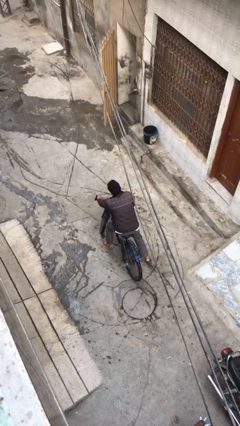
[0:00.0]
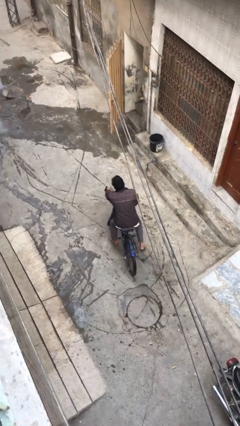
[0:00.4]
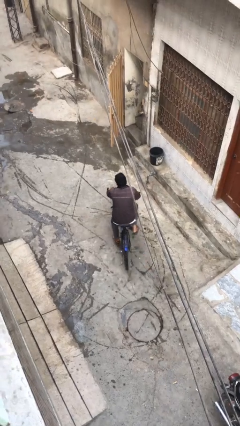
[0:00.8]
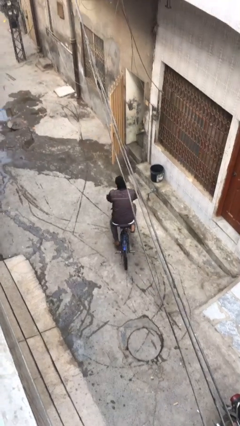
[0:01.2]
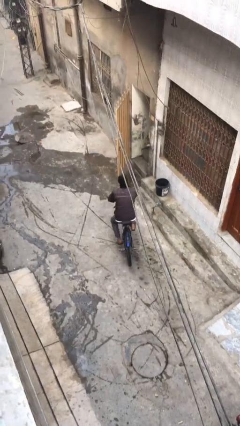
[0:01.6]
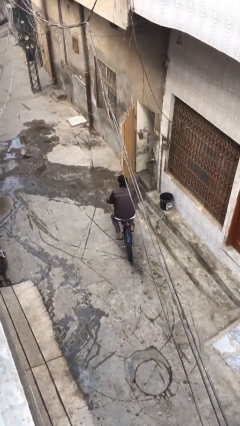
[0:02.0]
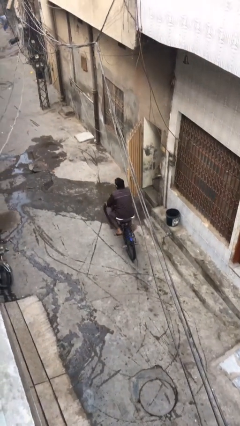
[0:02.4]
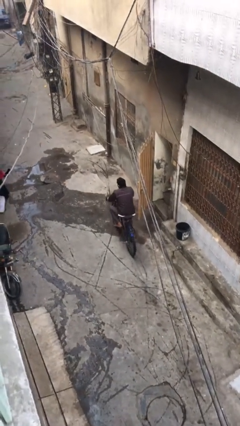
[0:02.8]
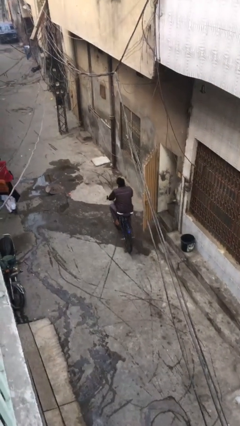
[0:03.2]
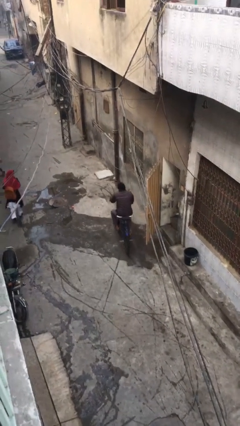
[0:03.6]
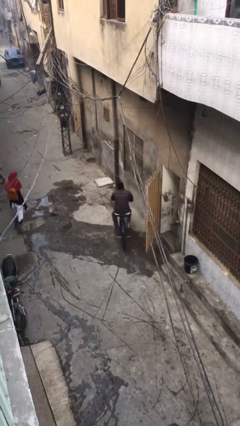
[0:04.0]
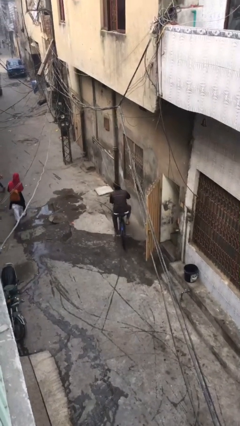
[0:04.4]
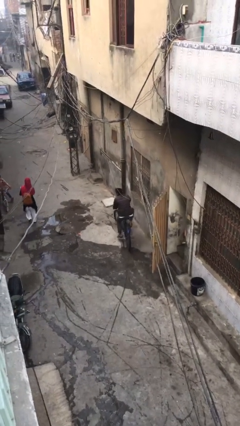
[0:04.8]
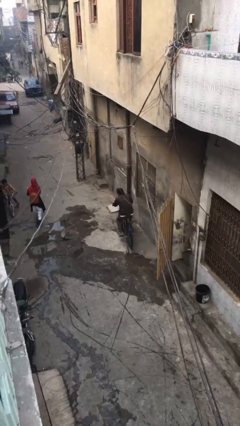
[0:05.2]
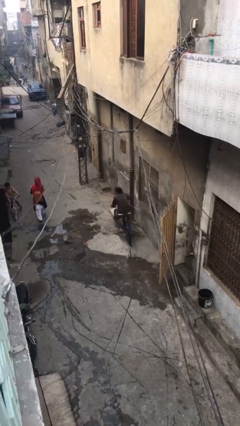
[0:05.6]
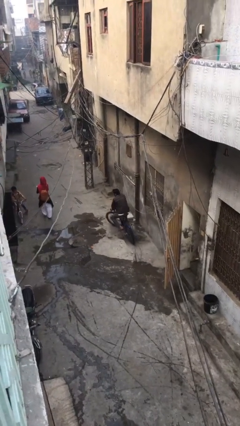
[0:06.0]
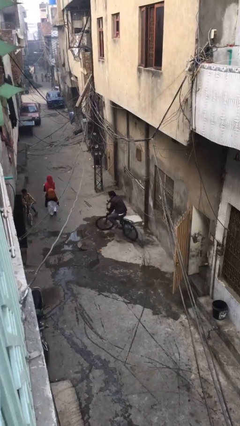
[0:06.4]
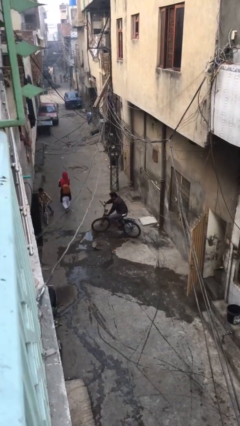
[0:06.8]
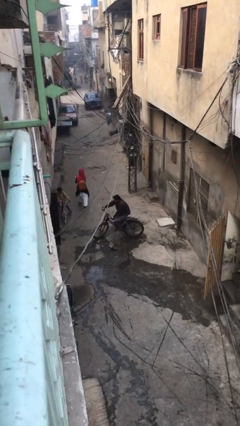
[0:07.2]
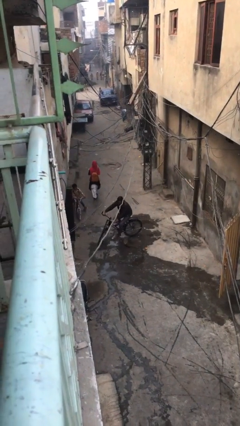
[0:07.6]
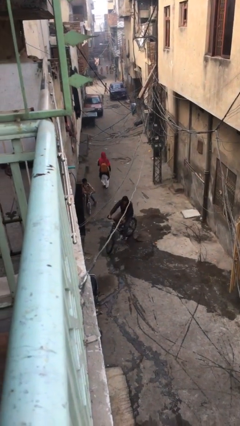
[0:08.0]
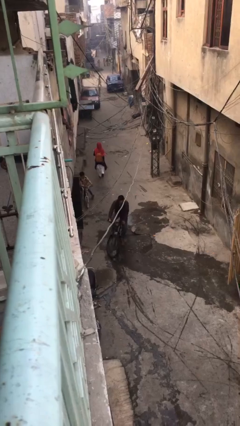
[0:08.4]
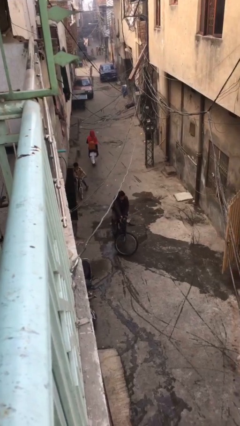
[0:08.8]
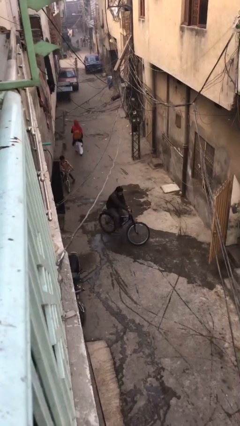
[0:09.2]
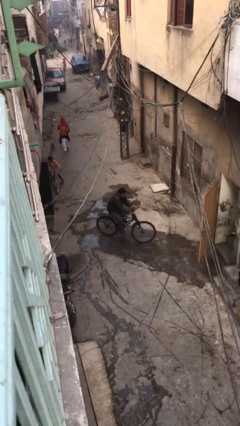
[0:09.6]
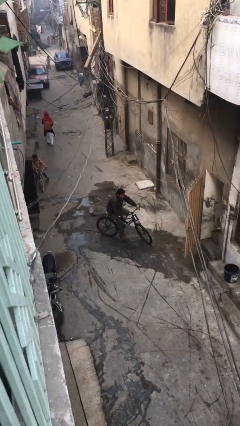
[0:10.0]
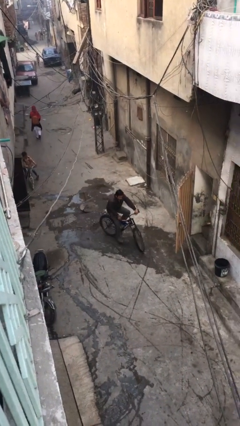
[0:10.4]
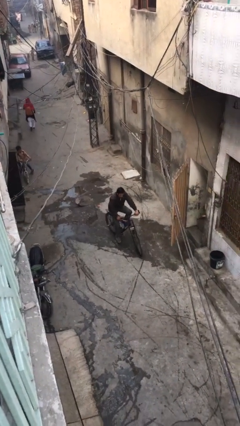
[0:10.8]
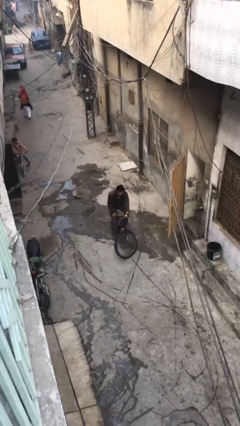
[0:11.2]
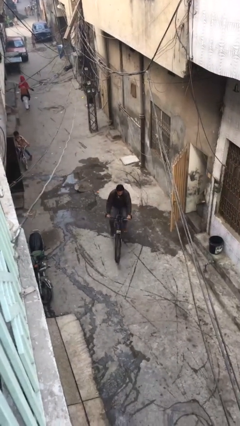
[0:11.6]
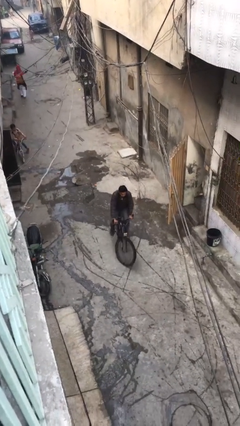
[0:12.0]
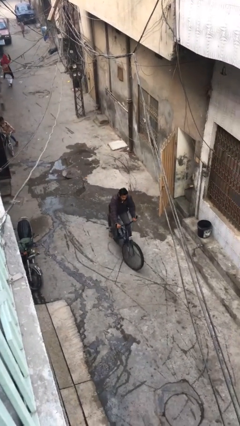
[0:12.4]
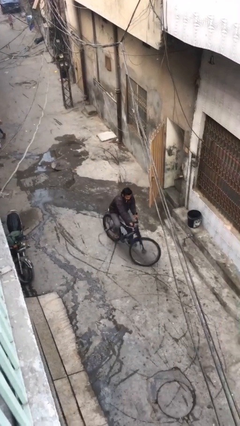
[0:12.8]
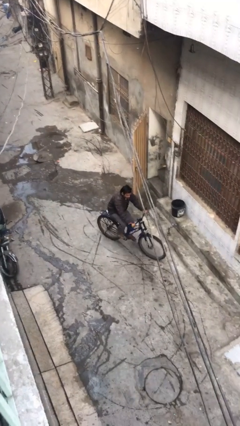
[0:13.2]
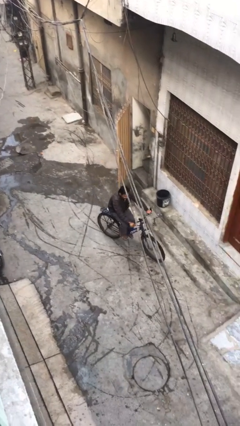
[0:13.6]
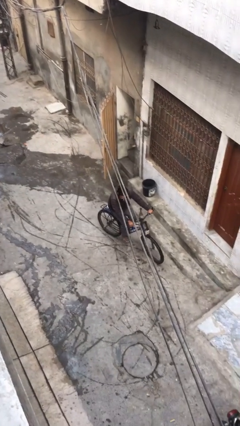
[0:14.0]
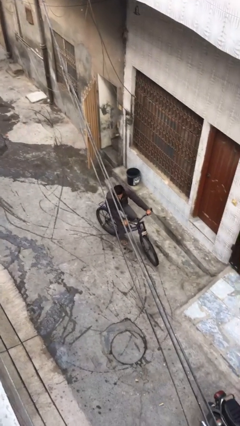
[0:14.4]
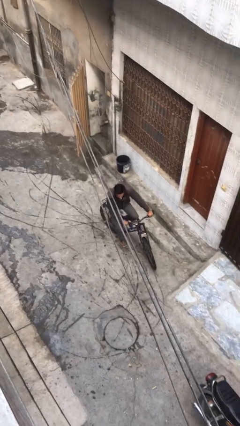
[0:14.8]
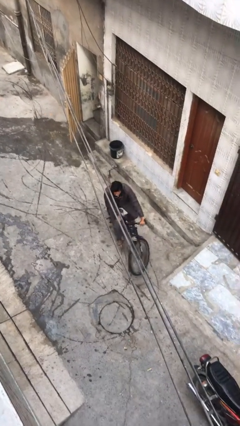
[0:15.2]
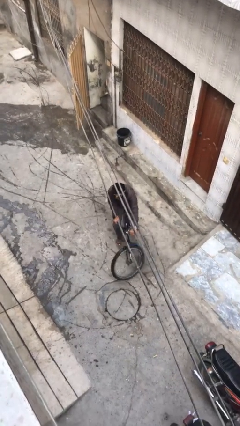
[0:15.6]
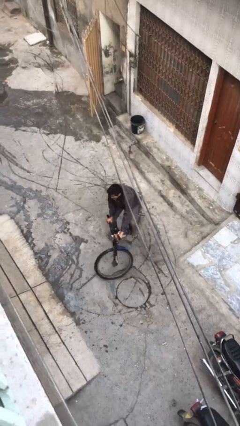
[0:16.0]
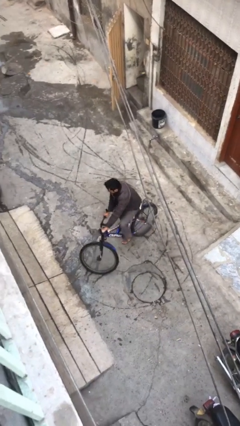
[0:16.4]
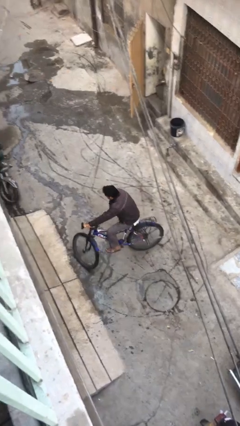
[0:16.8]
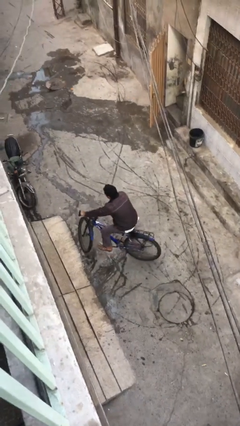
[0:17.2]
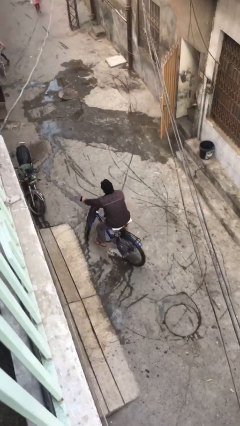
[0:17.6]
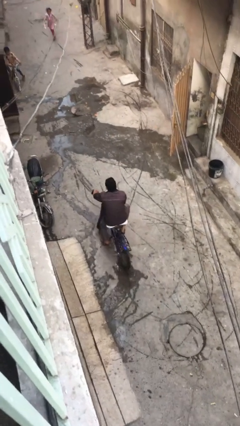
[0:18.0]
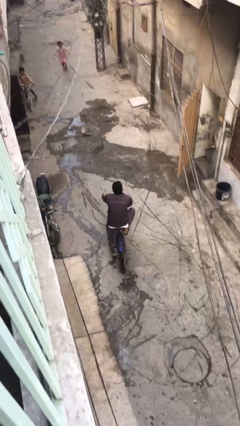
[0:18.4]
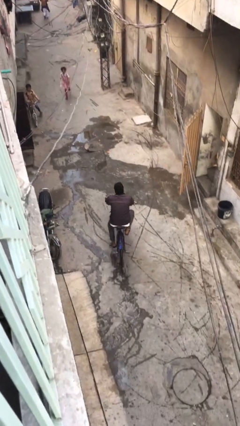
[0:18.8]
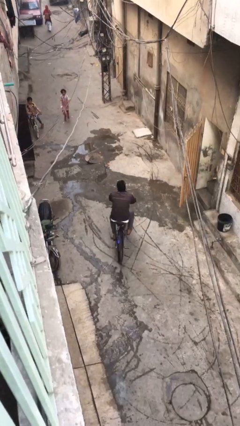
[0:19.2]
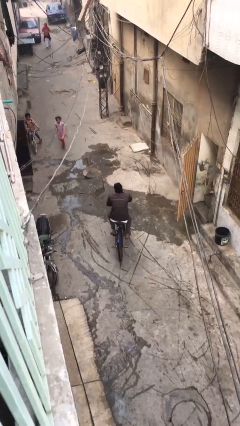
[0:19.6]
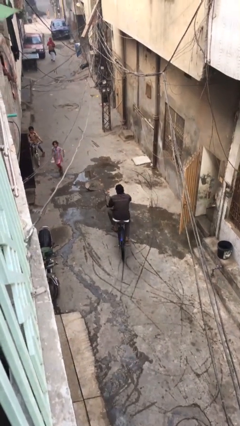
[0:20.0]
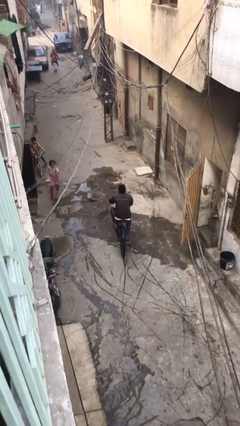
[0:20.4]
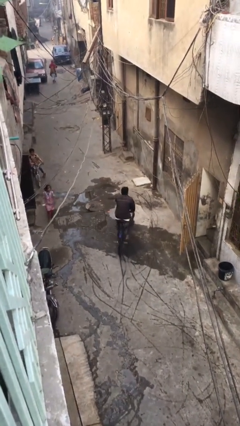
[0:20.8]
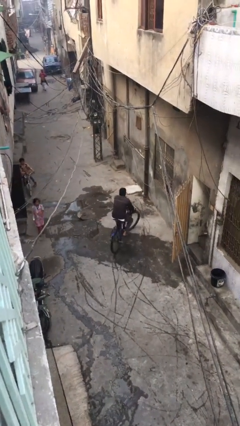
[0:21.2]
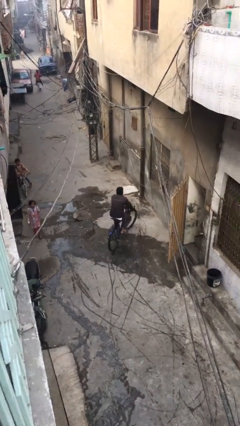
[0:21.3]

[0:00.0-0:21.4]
person rides bicycle

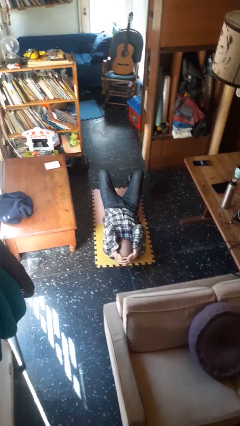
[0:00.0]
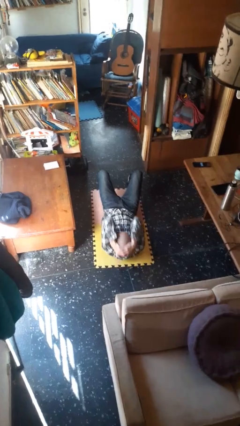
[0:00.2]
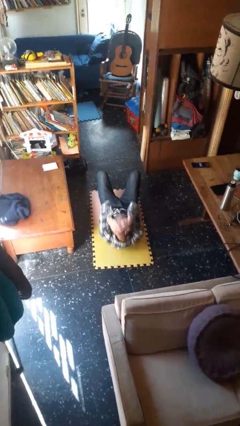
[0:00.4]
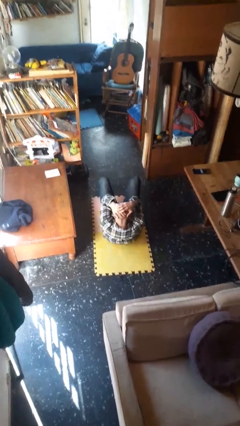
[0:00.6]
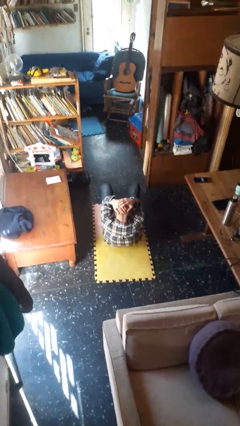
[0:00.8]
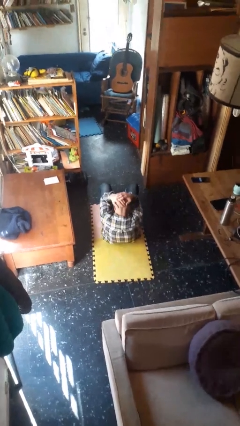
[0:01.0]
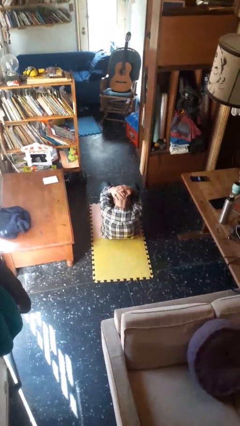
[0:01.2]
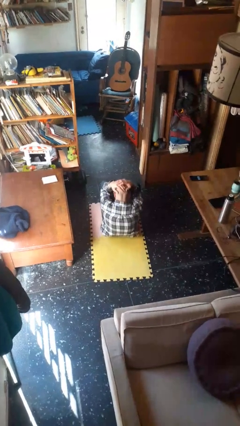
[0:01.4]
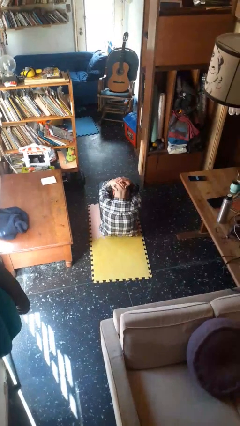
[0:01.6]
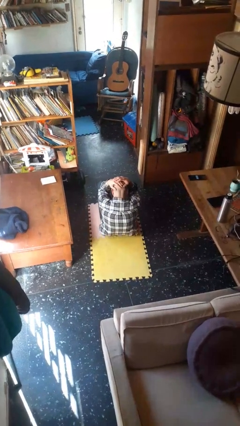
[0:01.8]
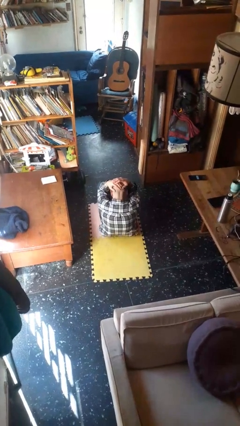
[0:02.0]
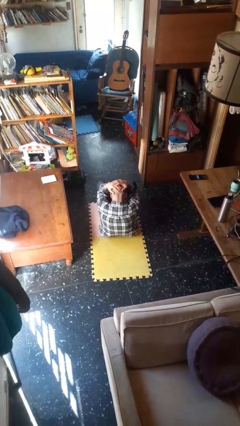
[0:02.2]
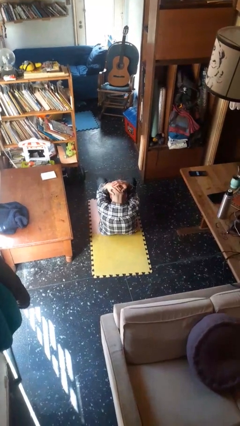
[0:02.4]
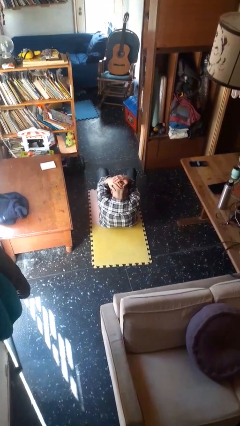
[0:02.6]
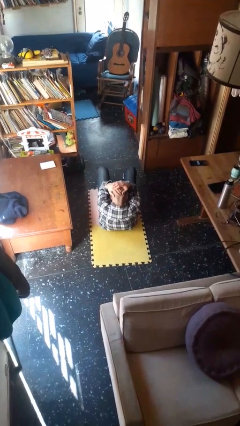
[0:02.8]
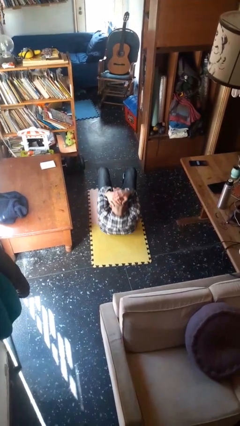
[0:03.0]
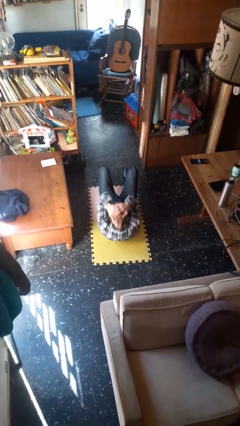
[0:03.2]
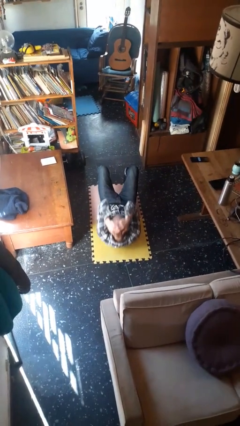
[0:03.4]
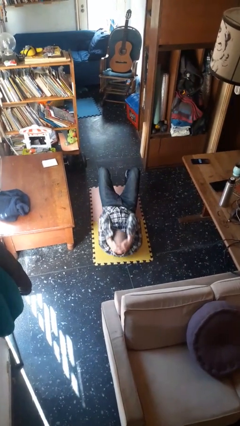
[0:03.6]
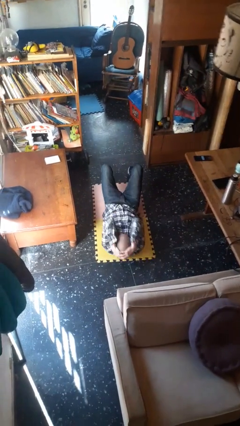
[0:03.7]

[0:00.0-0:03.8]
person exercises with situp

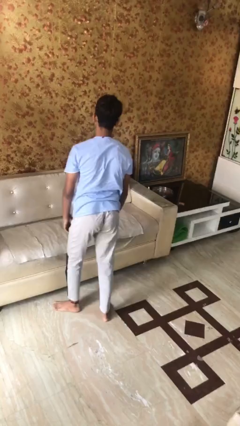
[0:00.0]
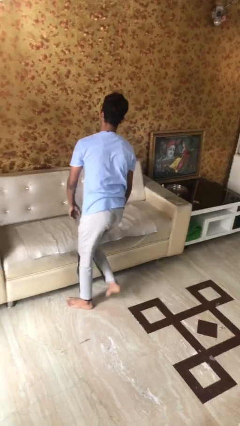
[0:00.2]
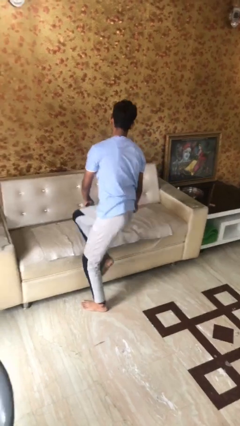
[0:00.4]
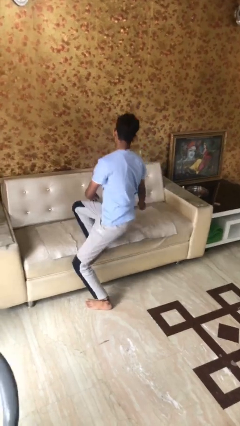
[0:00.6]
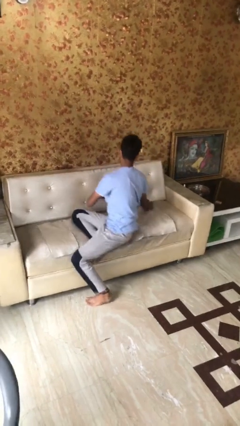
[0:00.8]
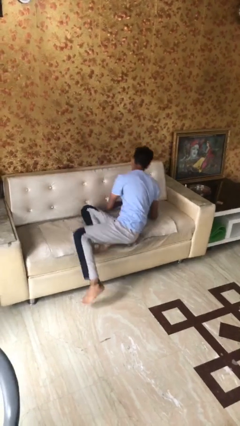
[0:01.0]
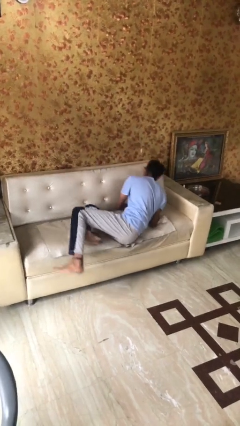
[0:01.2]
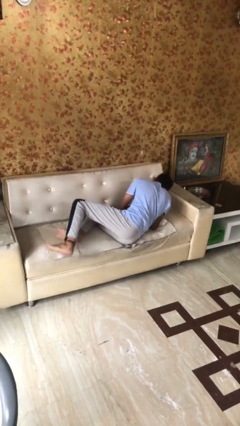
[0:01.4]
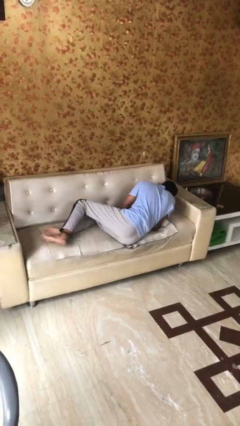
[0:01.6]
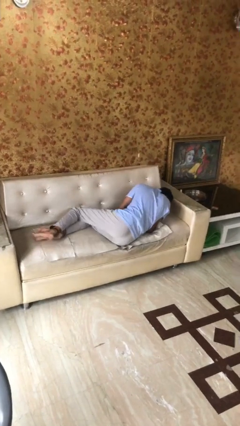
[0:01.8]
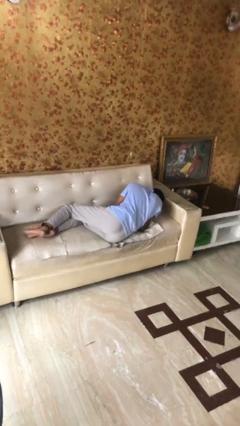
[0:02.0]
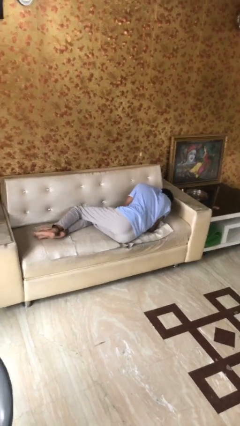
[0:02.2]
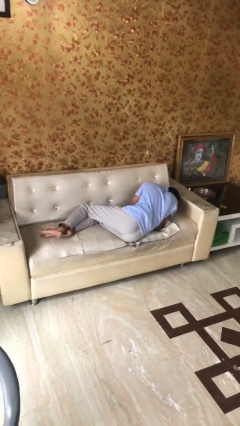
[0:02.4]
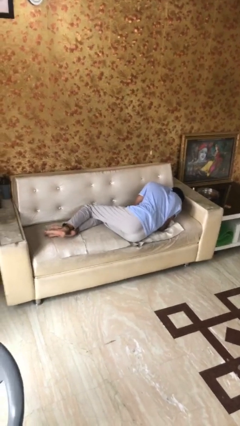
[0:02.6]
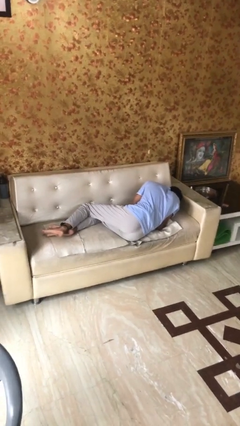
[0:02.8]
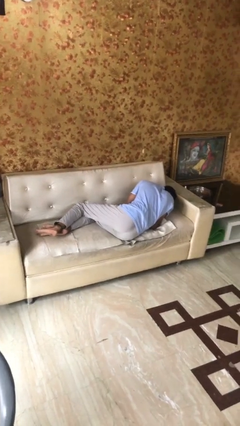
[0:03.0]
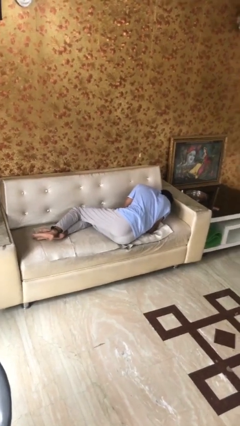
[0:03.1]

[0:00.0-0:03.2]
person lies down on bed
